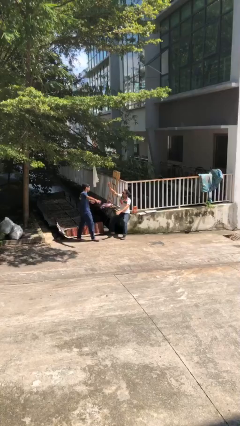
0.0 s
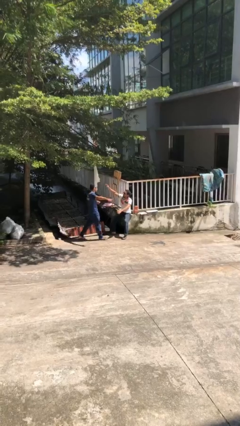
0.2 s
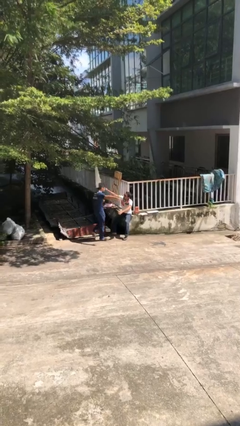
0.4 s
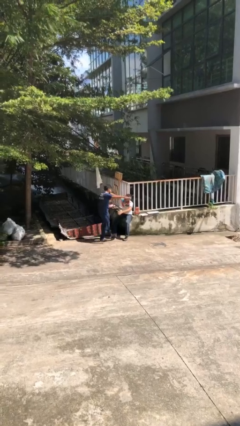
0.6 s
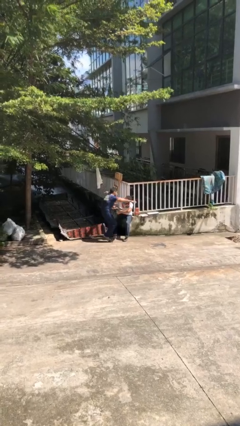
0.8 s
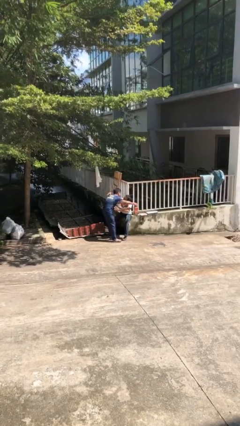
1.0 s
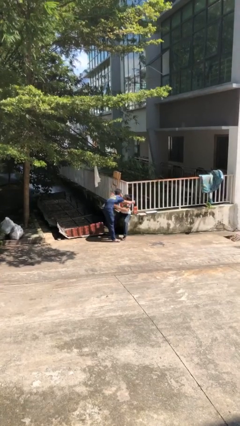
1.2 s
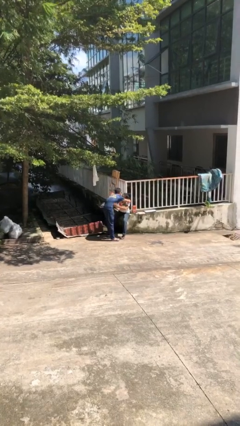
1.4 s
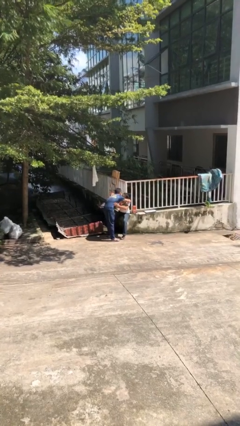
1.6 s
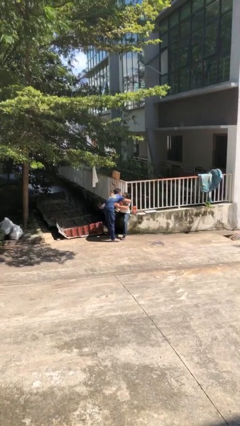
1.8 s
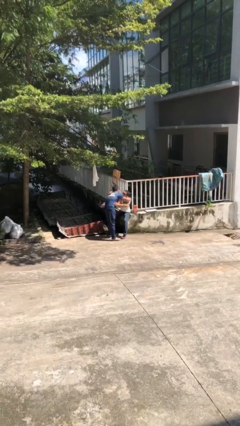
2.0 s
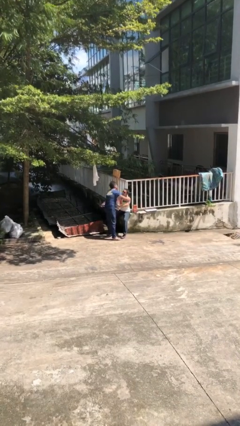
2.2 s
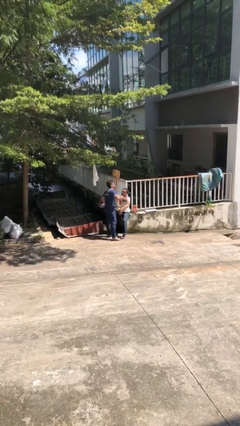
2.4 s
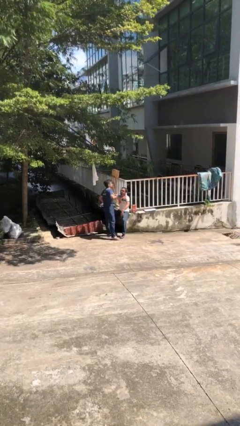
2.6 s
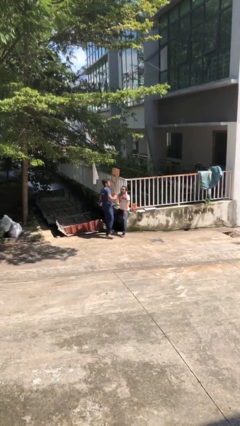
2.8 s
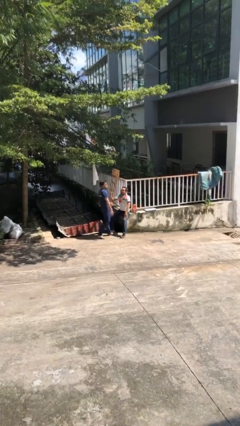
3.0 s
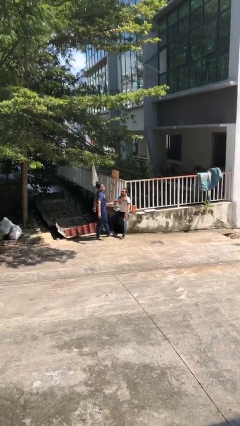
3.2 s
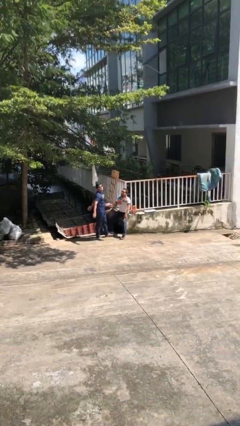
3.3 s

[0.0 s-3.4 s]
person embraces person

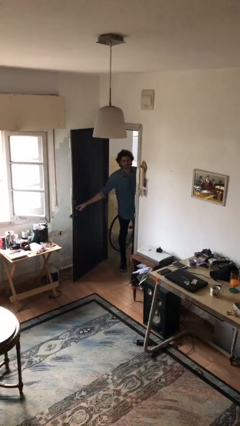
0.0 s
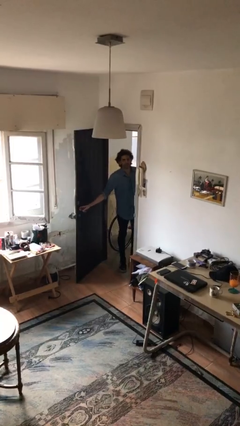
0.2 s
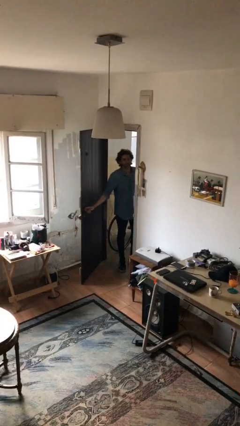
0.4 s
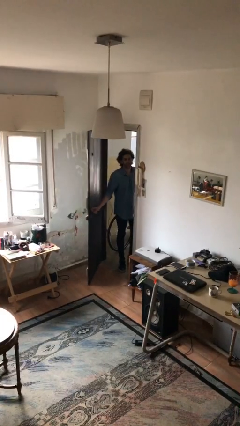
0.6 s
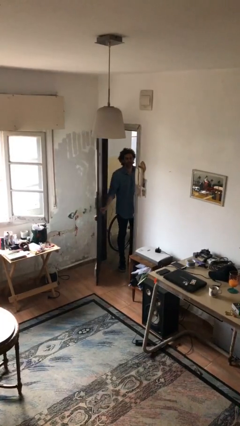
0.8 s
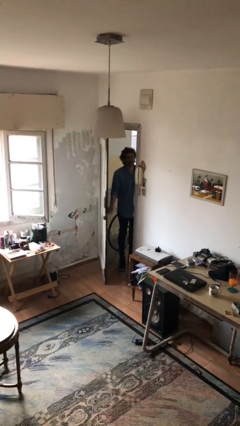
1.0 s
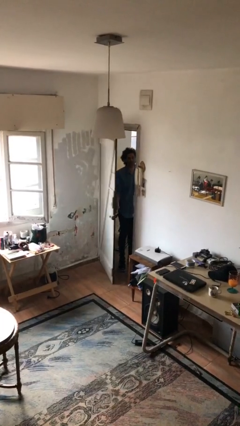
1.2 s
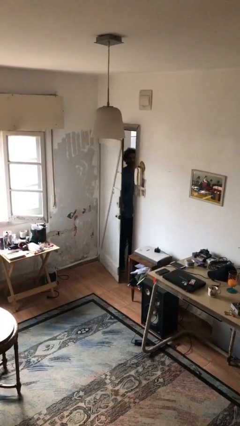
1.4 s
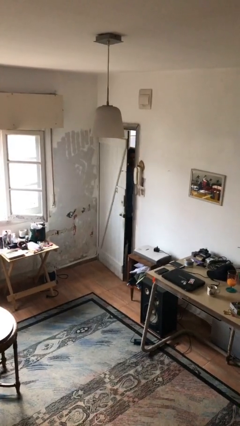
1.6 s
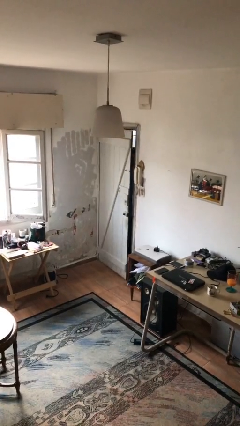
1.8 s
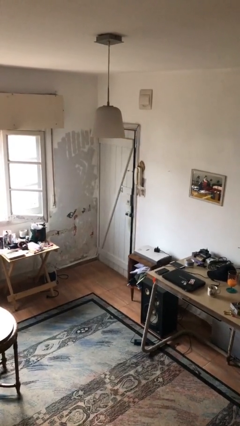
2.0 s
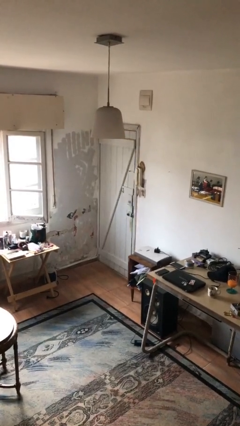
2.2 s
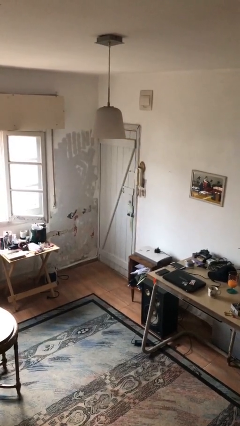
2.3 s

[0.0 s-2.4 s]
person closes facility door

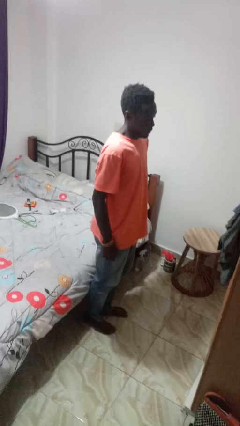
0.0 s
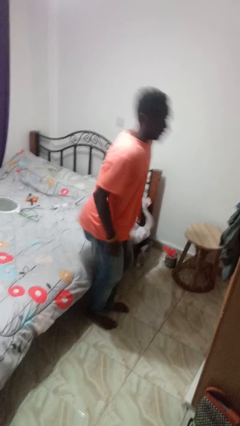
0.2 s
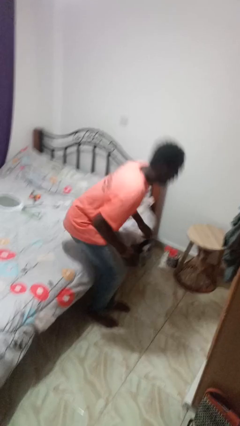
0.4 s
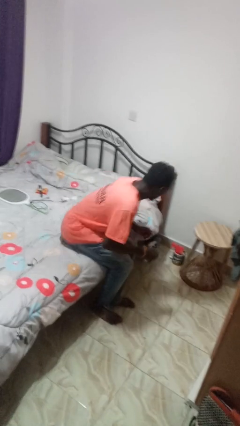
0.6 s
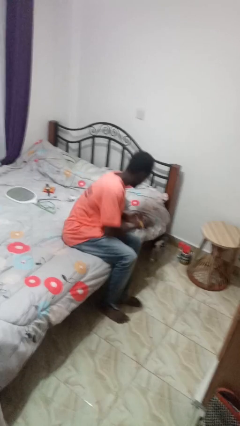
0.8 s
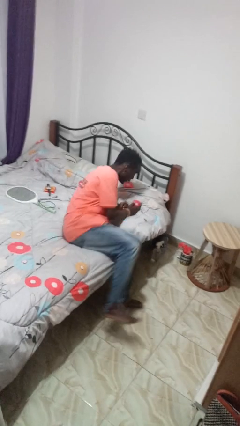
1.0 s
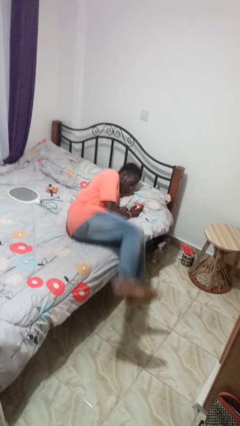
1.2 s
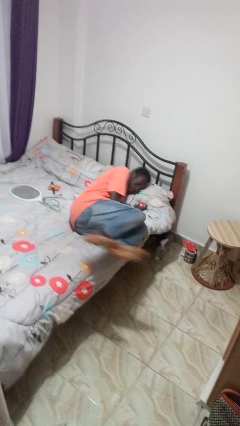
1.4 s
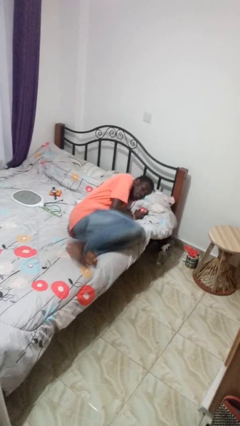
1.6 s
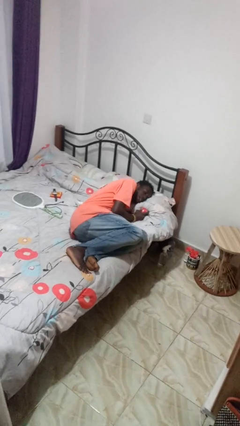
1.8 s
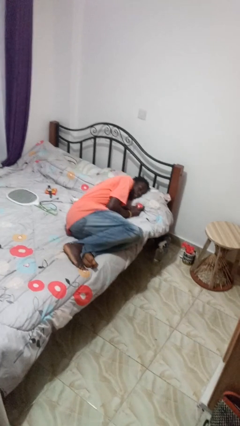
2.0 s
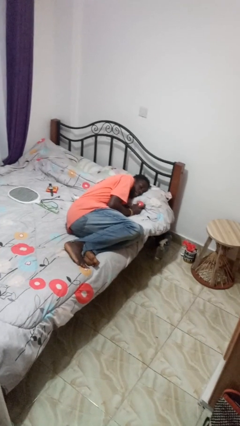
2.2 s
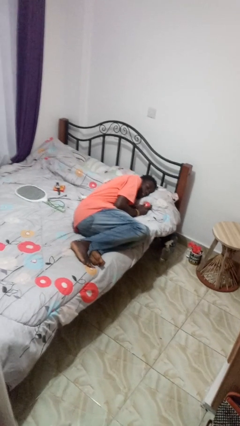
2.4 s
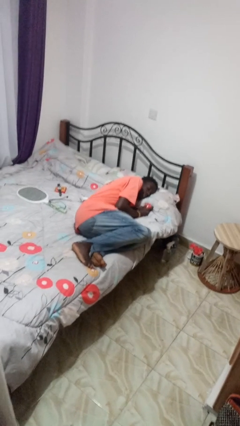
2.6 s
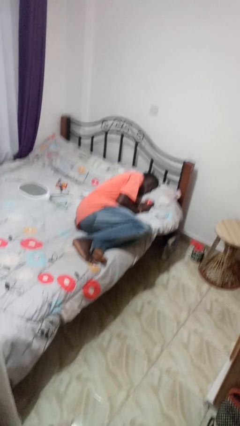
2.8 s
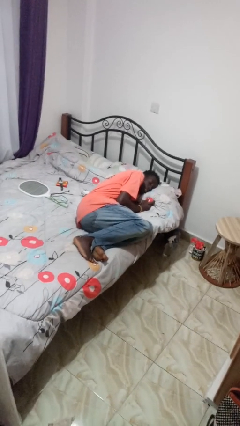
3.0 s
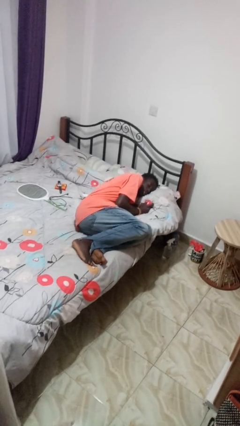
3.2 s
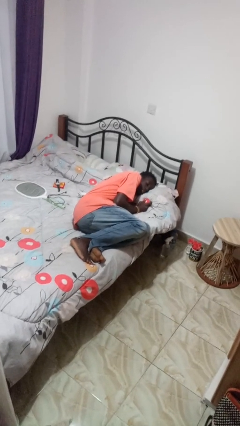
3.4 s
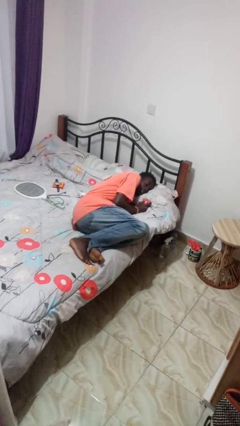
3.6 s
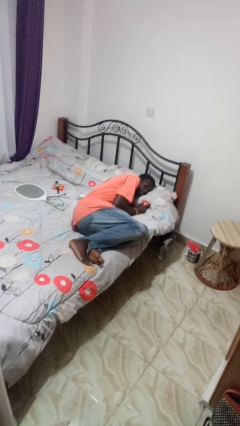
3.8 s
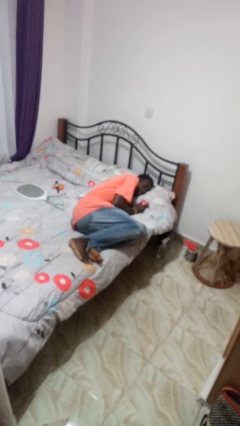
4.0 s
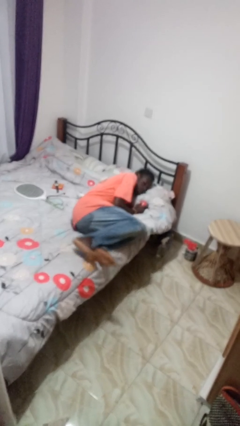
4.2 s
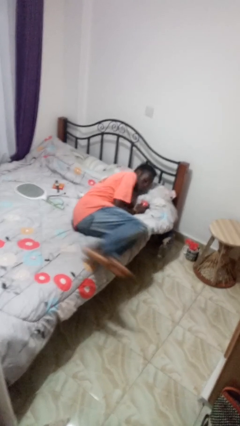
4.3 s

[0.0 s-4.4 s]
person lies down on bed

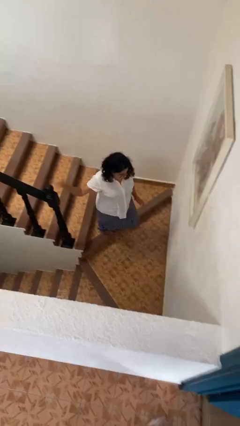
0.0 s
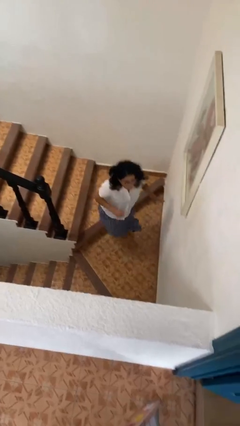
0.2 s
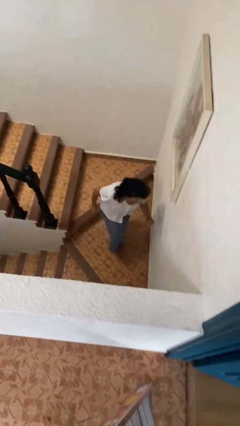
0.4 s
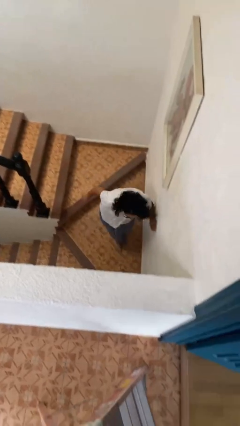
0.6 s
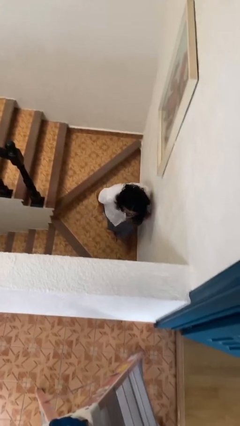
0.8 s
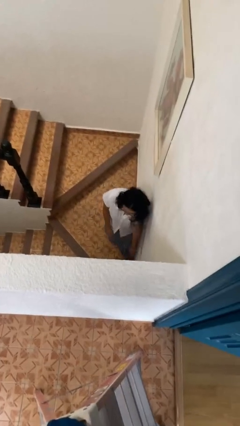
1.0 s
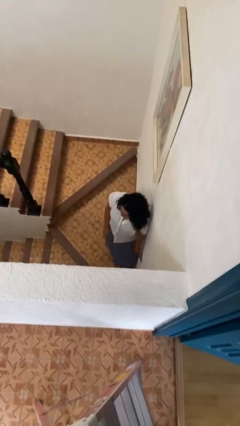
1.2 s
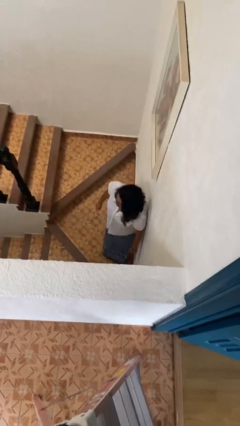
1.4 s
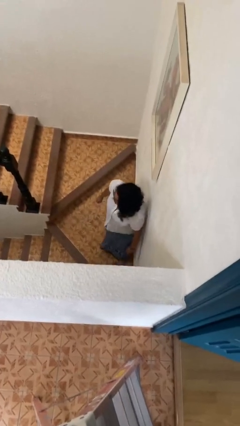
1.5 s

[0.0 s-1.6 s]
person trips on stair

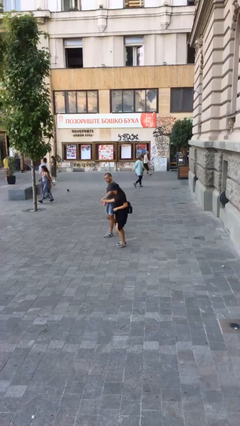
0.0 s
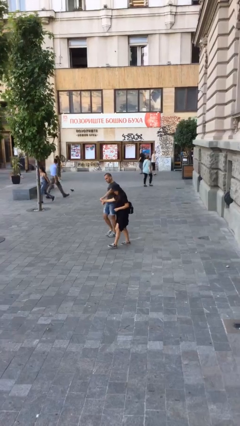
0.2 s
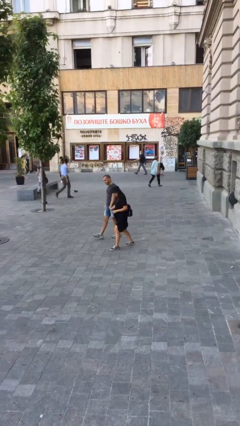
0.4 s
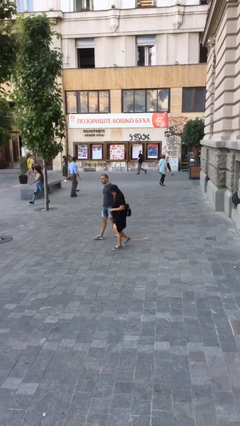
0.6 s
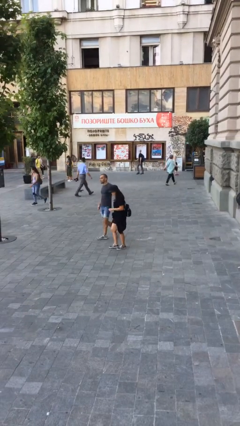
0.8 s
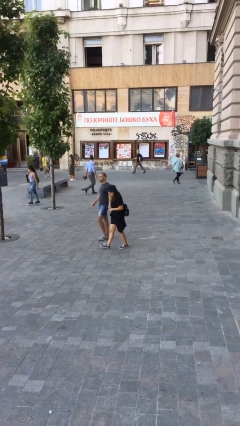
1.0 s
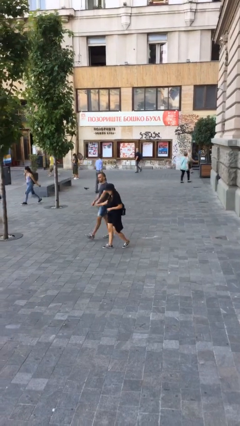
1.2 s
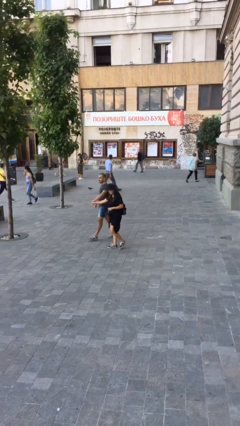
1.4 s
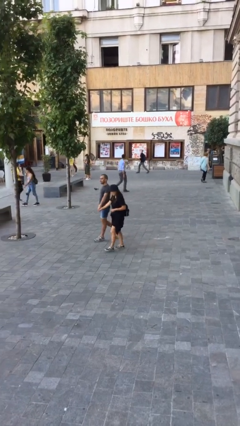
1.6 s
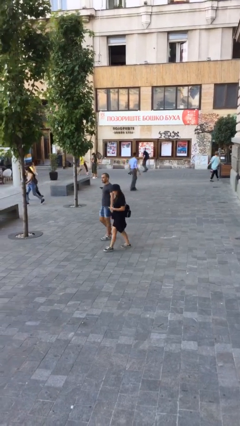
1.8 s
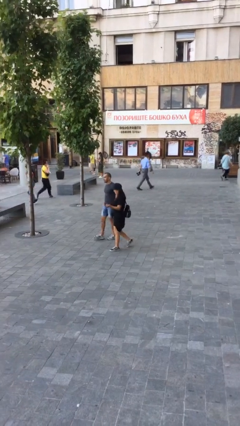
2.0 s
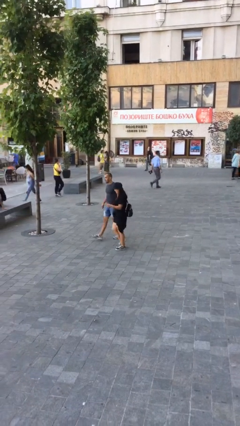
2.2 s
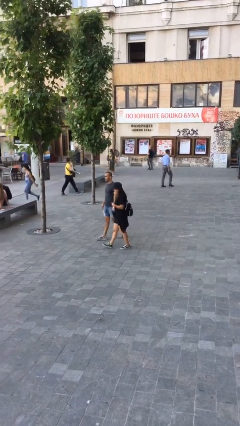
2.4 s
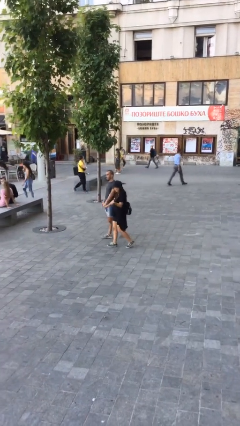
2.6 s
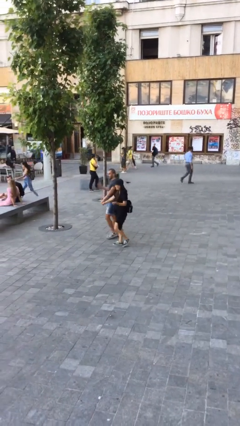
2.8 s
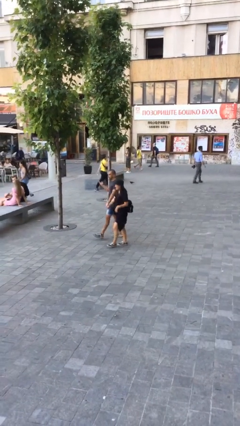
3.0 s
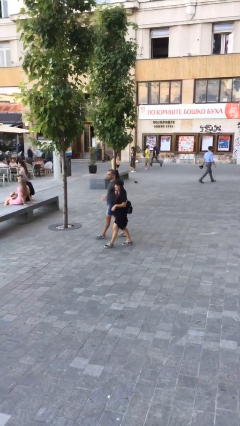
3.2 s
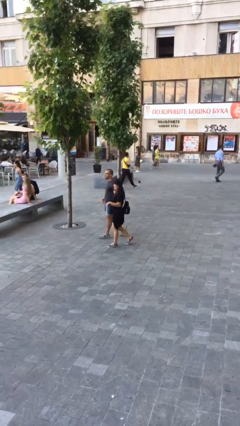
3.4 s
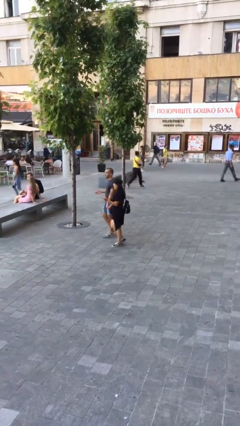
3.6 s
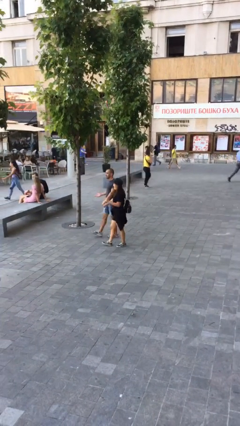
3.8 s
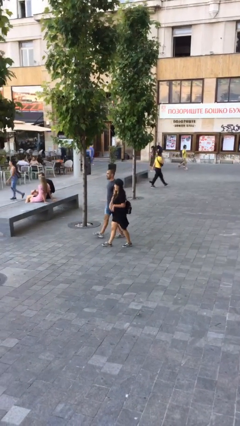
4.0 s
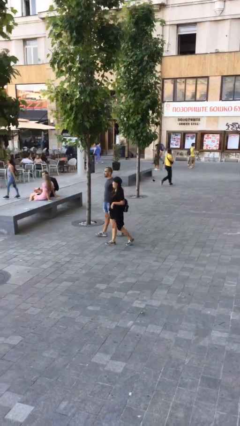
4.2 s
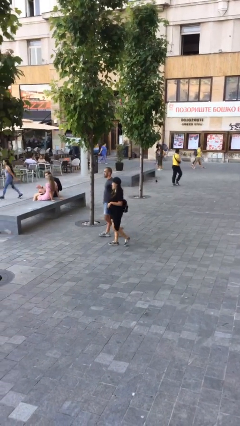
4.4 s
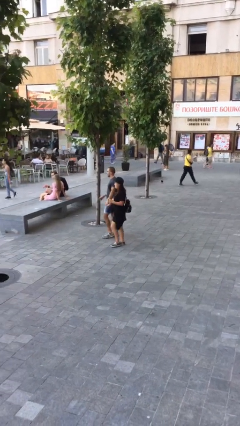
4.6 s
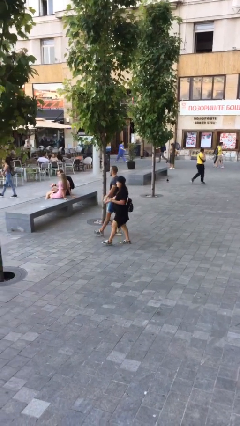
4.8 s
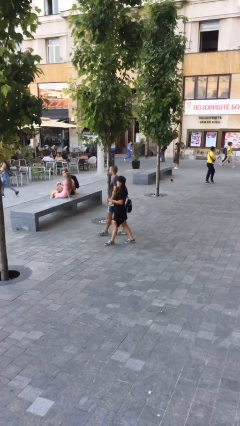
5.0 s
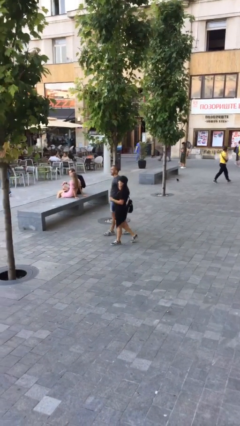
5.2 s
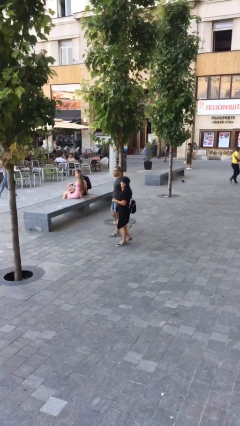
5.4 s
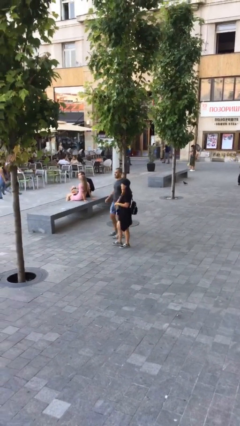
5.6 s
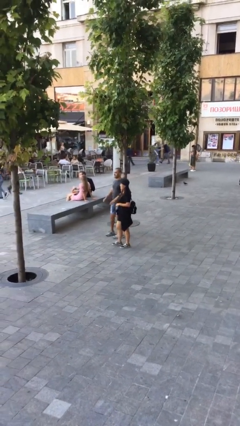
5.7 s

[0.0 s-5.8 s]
person holds hand
